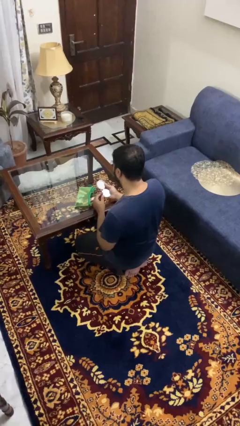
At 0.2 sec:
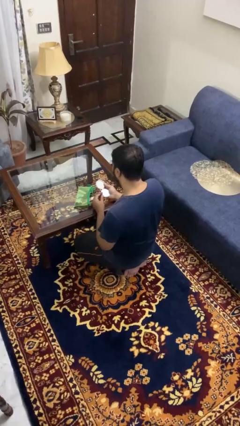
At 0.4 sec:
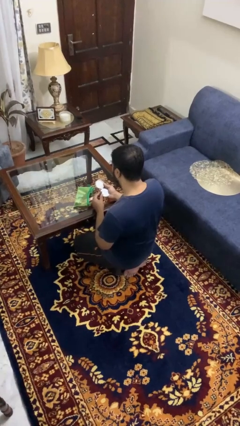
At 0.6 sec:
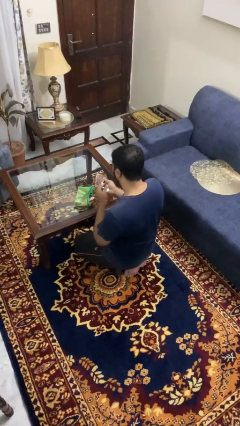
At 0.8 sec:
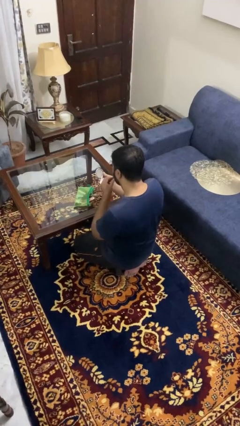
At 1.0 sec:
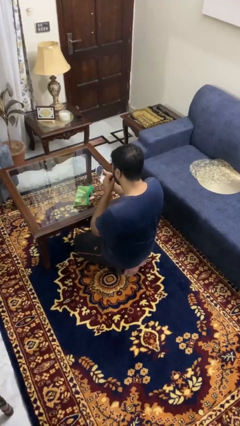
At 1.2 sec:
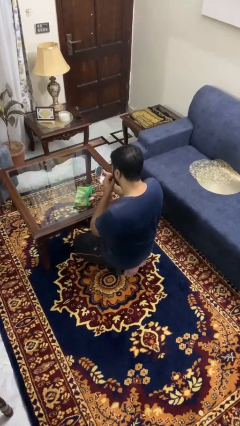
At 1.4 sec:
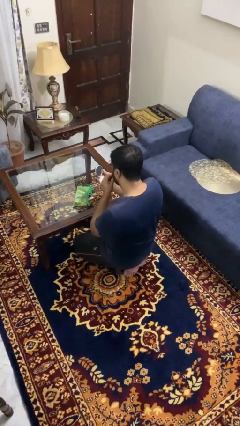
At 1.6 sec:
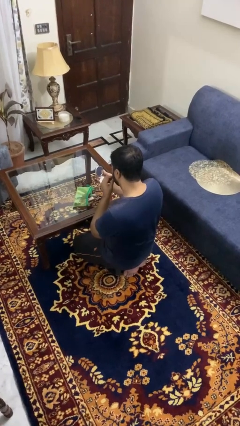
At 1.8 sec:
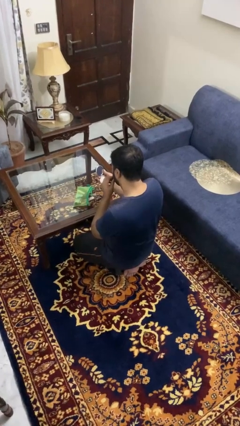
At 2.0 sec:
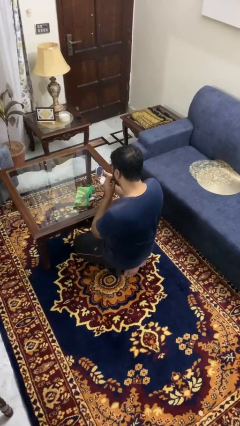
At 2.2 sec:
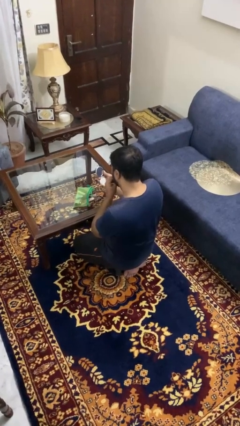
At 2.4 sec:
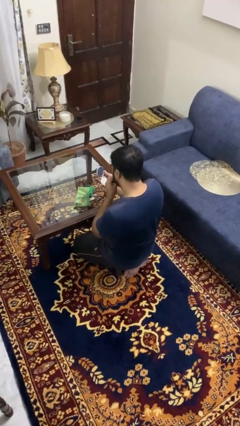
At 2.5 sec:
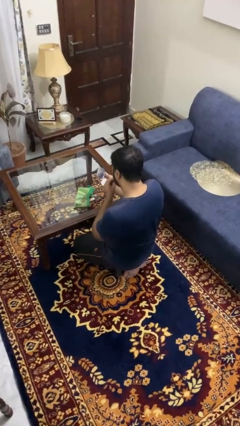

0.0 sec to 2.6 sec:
person applies lip makeup

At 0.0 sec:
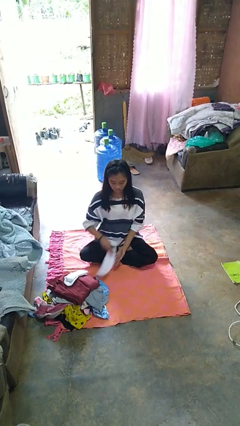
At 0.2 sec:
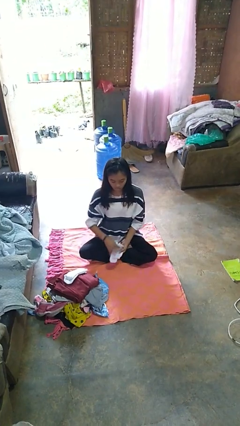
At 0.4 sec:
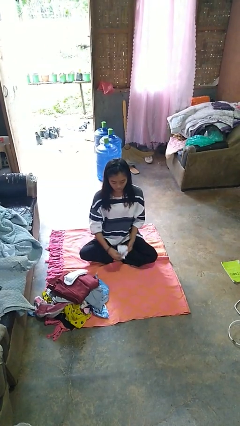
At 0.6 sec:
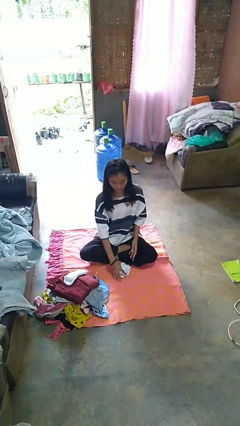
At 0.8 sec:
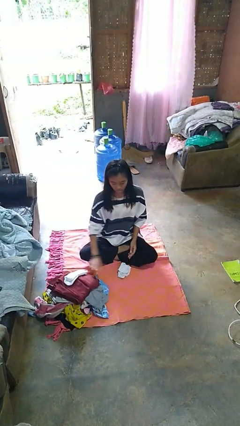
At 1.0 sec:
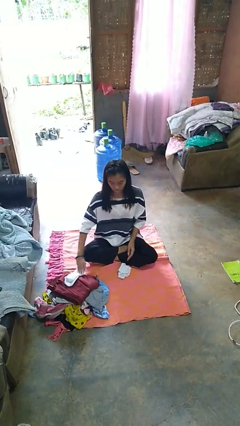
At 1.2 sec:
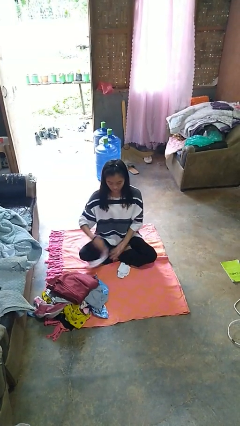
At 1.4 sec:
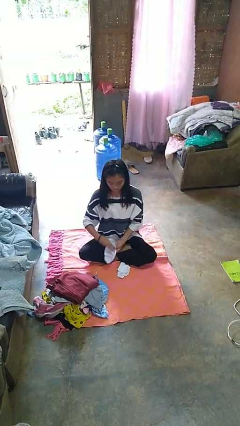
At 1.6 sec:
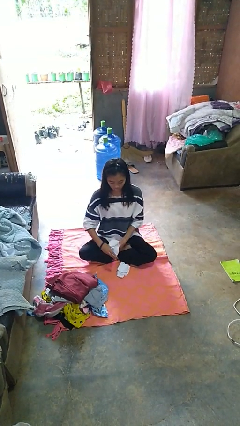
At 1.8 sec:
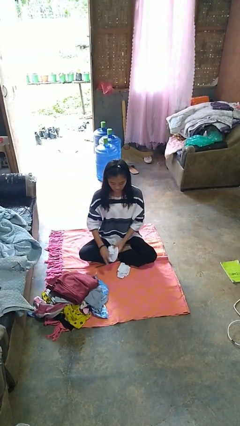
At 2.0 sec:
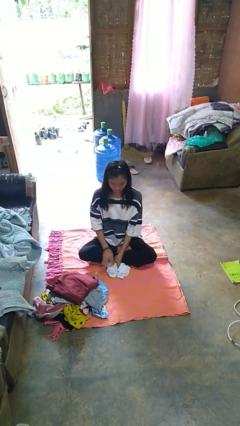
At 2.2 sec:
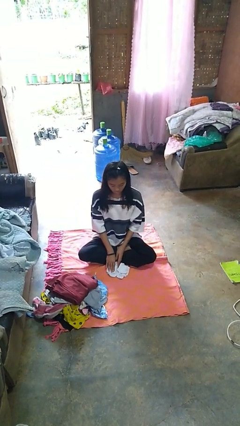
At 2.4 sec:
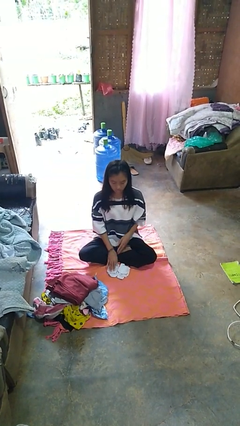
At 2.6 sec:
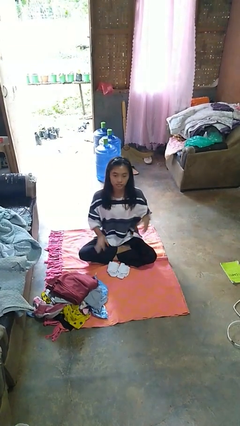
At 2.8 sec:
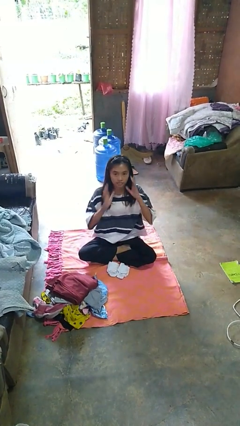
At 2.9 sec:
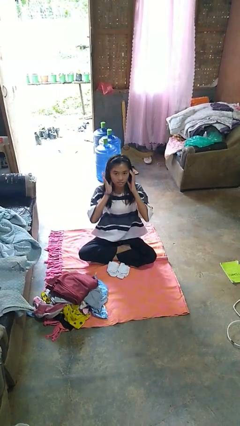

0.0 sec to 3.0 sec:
person folds socks

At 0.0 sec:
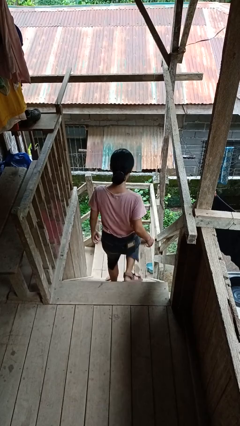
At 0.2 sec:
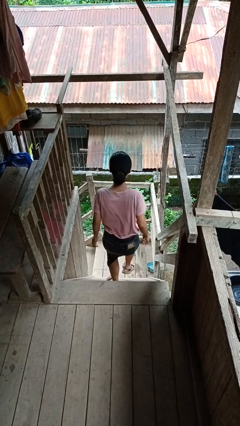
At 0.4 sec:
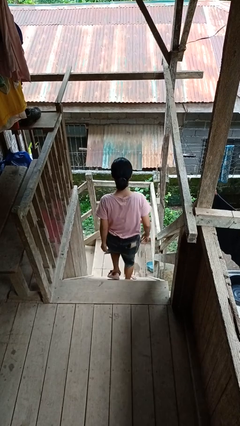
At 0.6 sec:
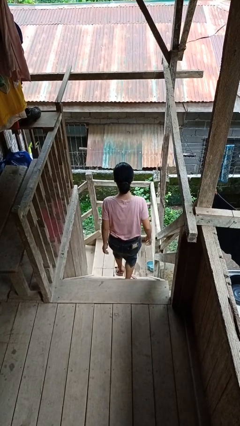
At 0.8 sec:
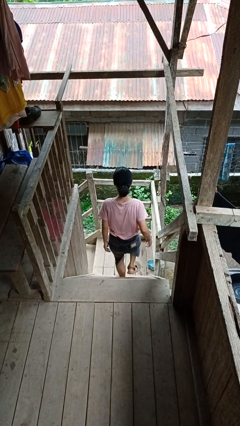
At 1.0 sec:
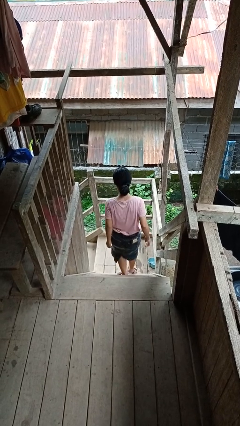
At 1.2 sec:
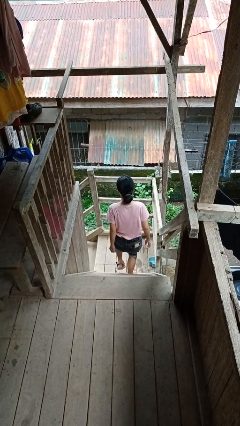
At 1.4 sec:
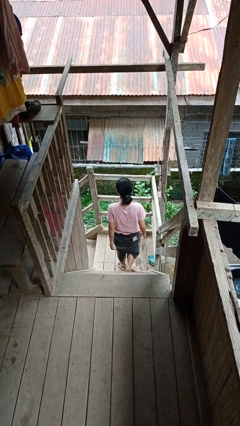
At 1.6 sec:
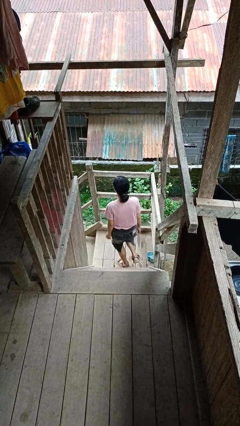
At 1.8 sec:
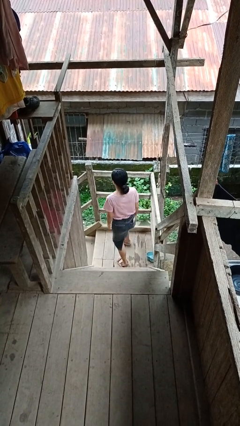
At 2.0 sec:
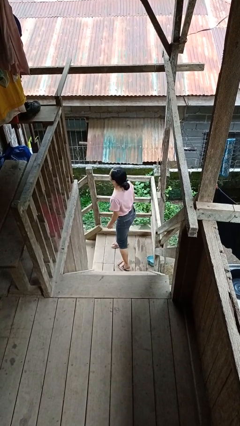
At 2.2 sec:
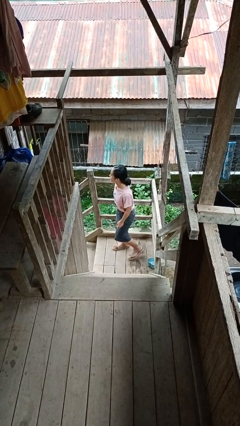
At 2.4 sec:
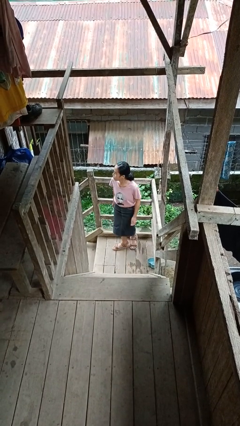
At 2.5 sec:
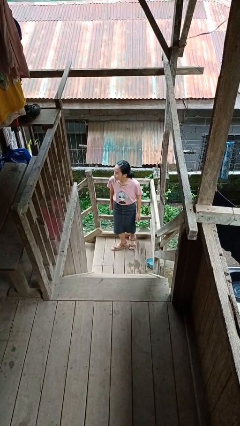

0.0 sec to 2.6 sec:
person climbs down stairs

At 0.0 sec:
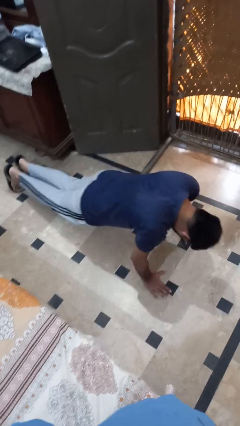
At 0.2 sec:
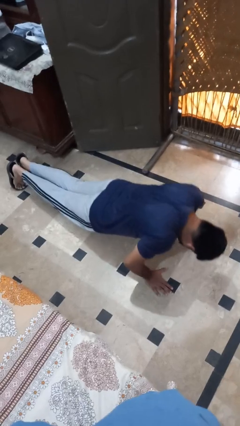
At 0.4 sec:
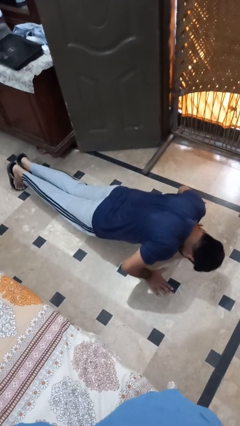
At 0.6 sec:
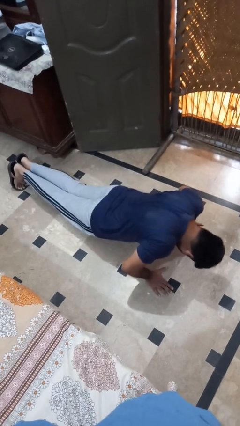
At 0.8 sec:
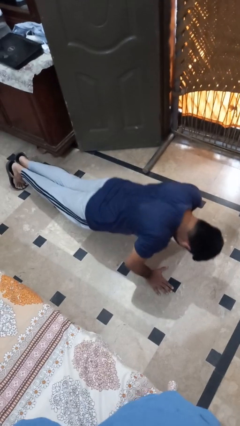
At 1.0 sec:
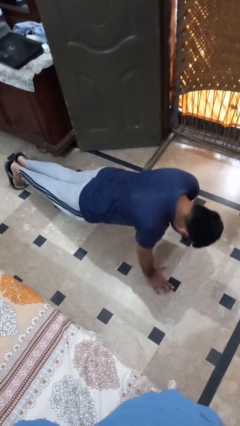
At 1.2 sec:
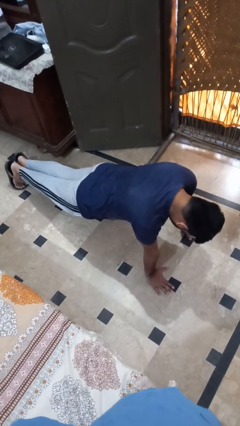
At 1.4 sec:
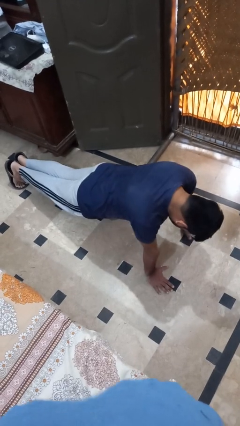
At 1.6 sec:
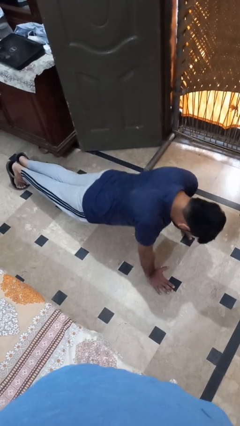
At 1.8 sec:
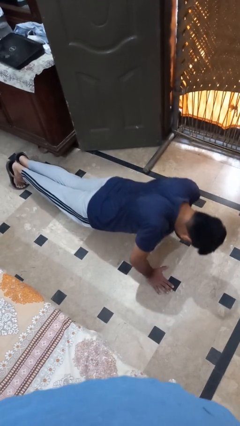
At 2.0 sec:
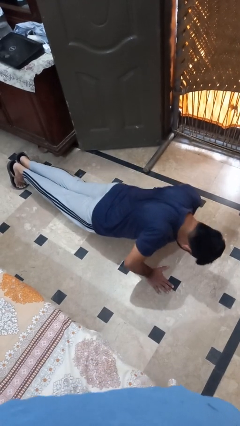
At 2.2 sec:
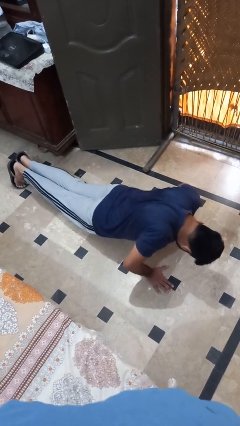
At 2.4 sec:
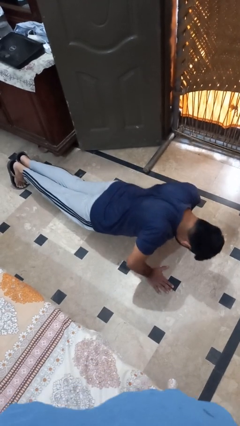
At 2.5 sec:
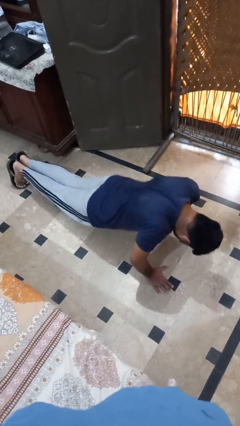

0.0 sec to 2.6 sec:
person exercises with pushup

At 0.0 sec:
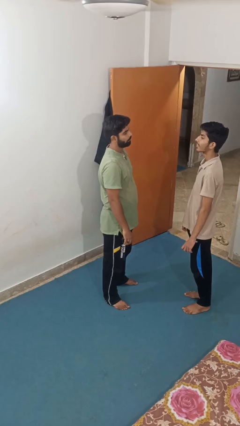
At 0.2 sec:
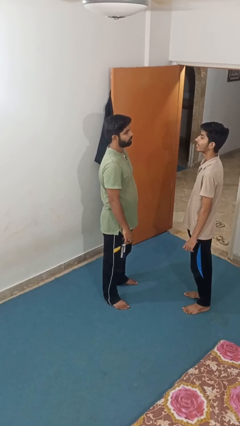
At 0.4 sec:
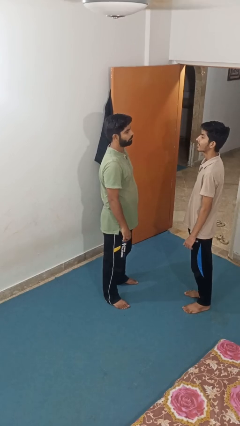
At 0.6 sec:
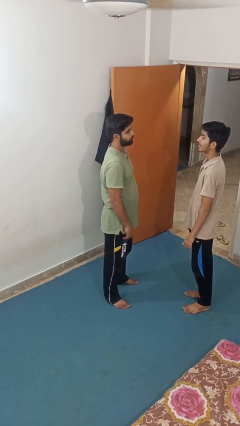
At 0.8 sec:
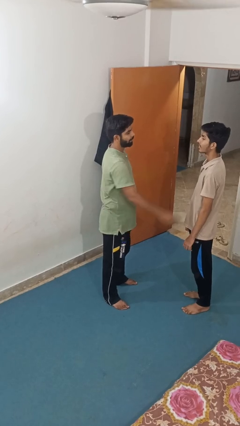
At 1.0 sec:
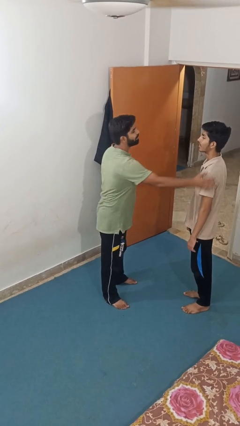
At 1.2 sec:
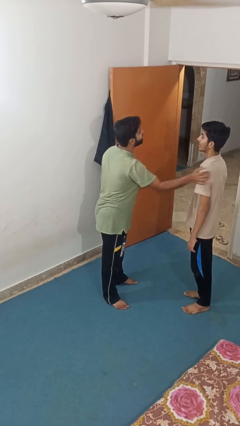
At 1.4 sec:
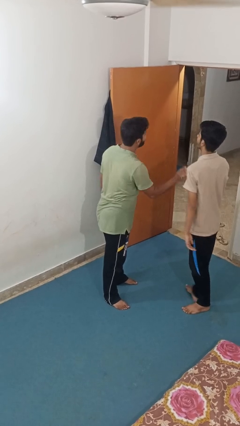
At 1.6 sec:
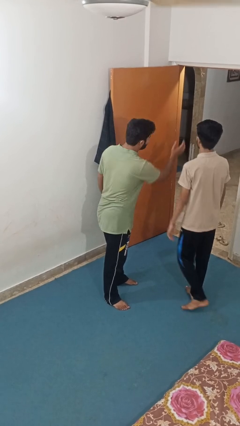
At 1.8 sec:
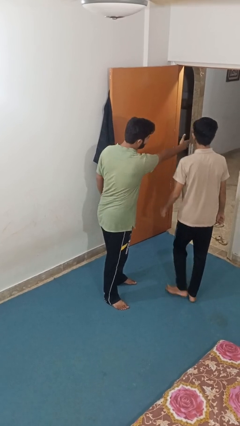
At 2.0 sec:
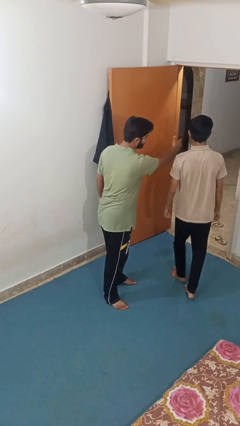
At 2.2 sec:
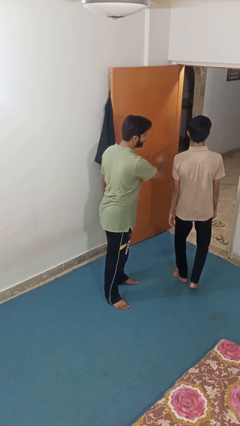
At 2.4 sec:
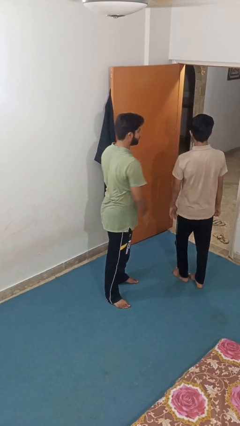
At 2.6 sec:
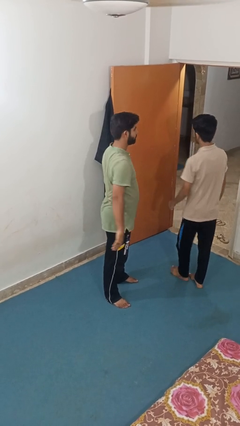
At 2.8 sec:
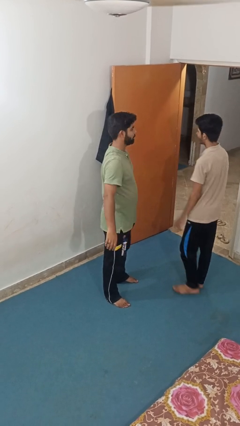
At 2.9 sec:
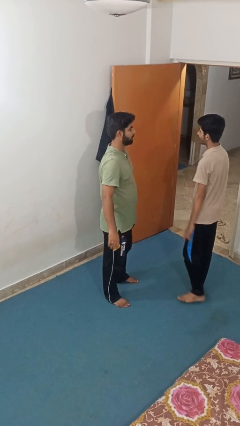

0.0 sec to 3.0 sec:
person shoves person

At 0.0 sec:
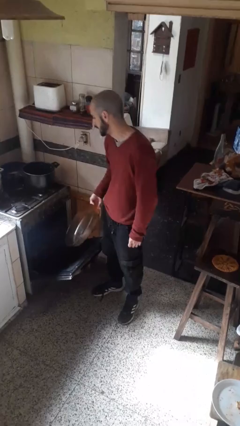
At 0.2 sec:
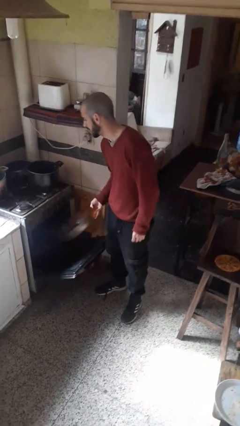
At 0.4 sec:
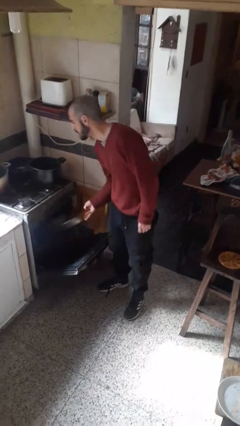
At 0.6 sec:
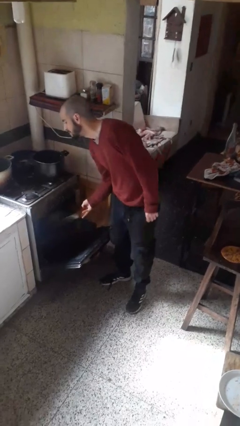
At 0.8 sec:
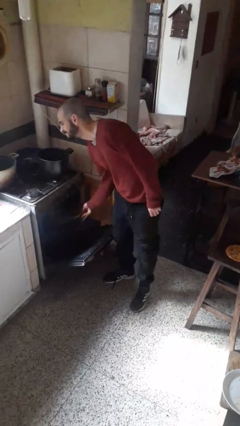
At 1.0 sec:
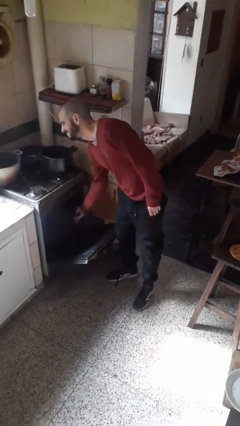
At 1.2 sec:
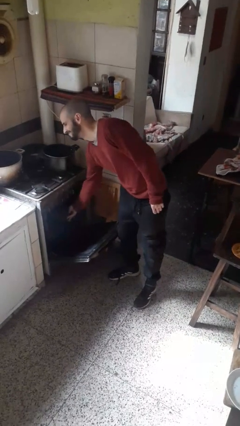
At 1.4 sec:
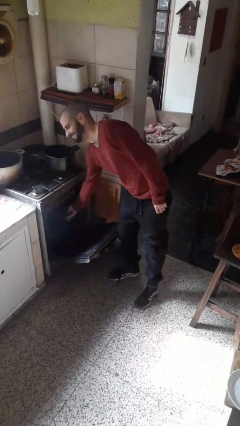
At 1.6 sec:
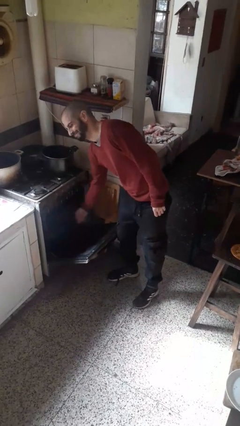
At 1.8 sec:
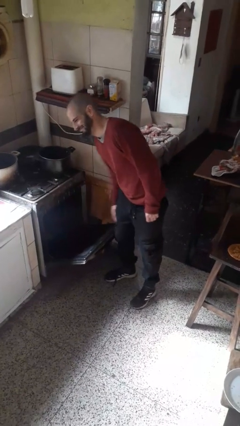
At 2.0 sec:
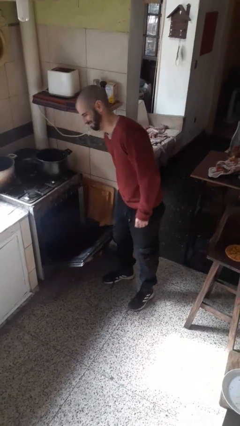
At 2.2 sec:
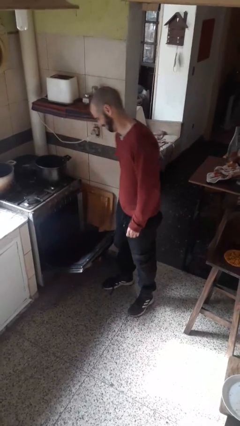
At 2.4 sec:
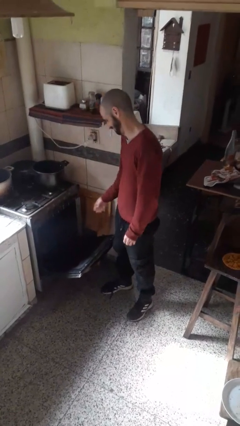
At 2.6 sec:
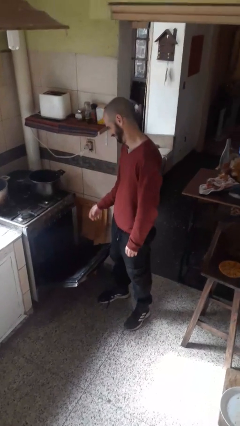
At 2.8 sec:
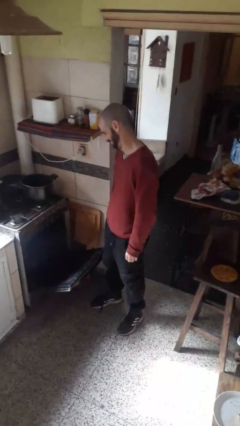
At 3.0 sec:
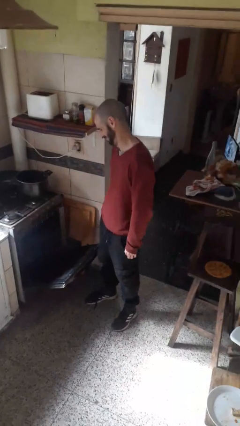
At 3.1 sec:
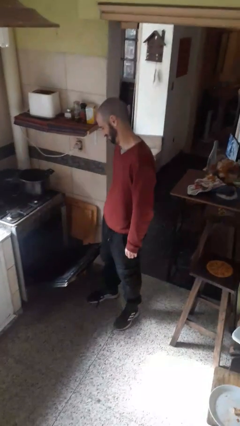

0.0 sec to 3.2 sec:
person puts object into oven
